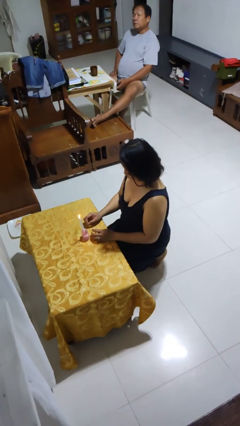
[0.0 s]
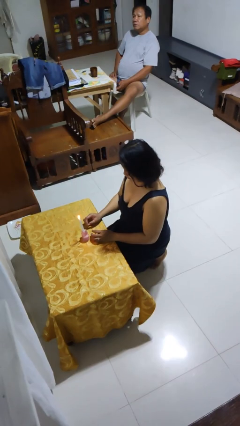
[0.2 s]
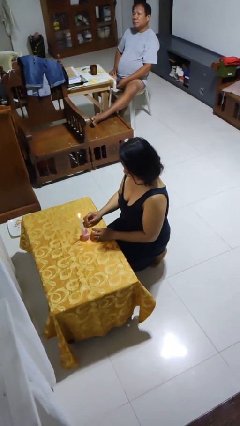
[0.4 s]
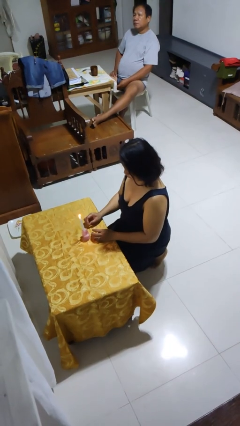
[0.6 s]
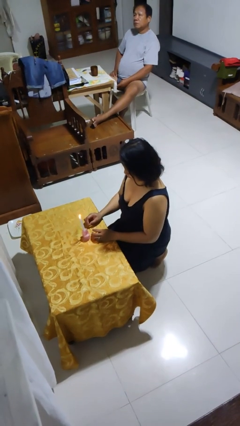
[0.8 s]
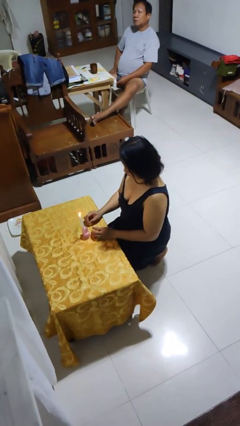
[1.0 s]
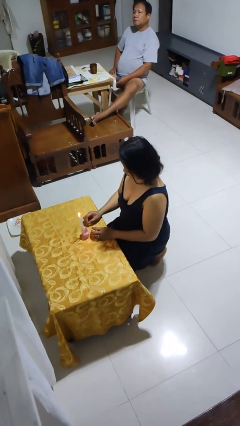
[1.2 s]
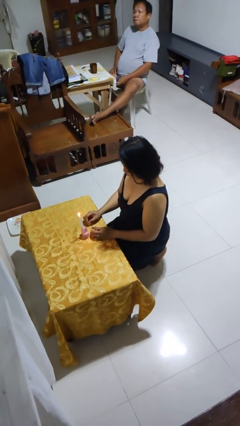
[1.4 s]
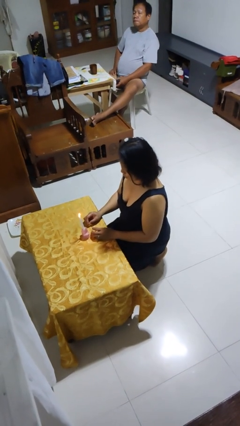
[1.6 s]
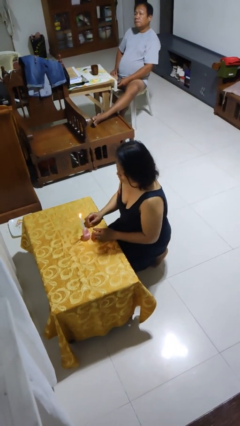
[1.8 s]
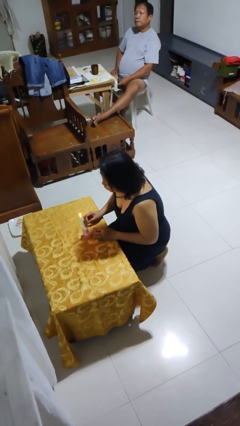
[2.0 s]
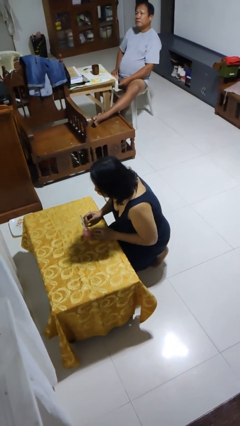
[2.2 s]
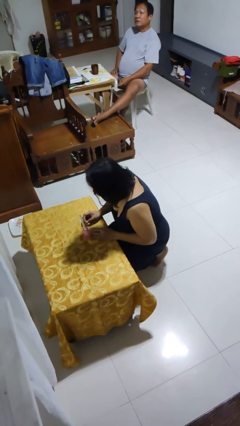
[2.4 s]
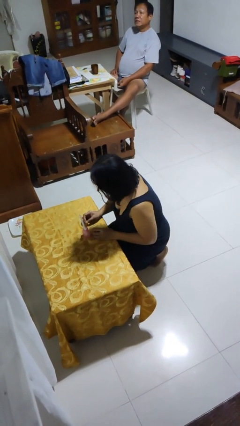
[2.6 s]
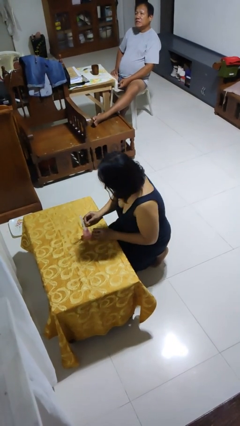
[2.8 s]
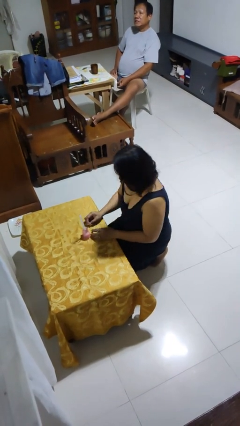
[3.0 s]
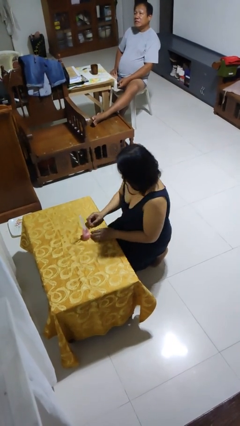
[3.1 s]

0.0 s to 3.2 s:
person extinguishes candle

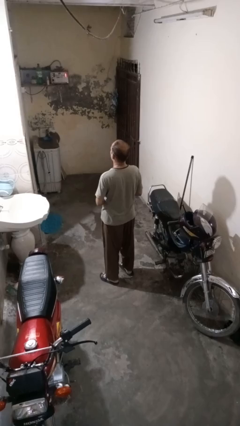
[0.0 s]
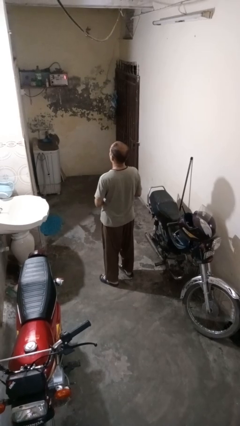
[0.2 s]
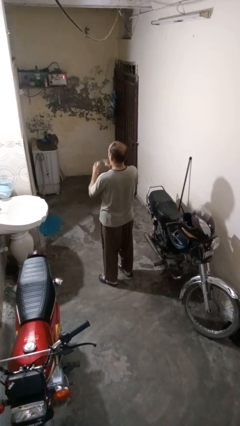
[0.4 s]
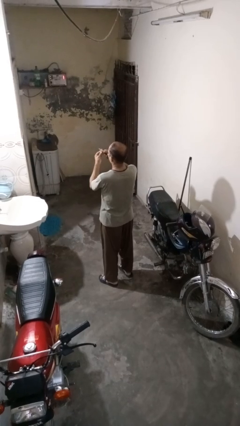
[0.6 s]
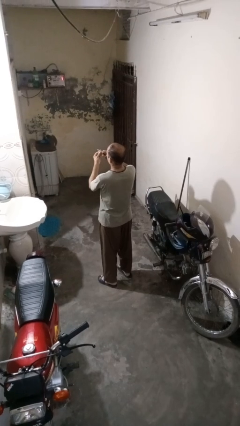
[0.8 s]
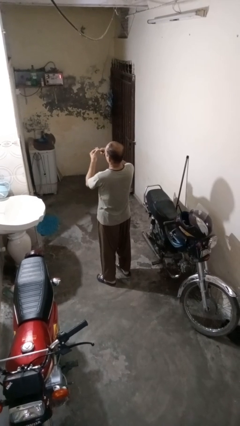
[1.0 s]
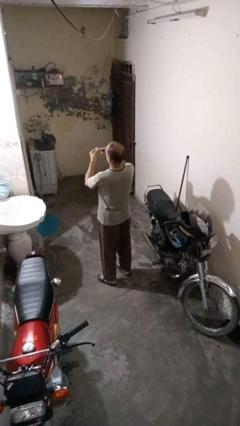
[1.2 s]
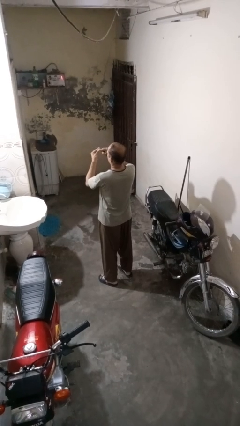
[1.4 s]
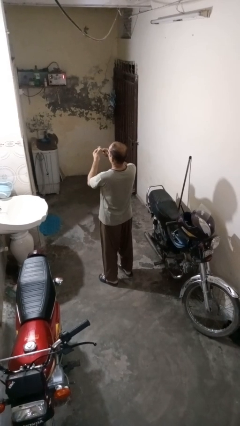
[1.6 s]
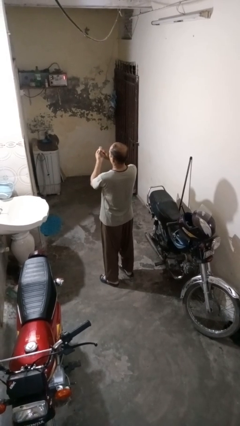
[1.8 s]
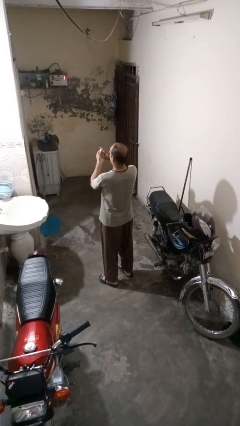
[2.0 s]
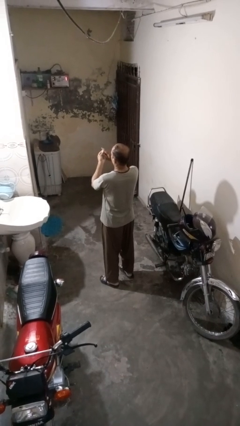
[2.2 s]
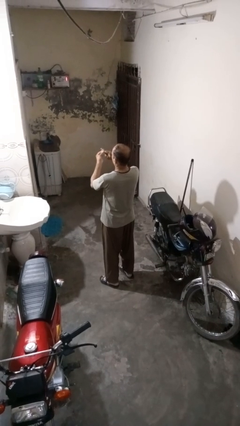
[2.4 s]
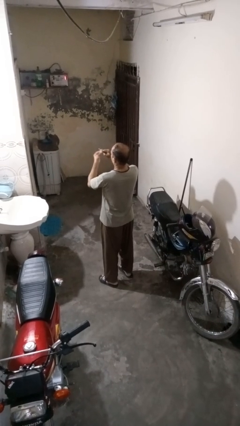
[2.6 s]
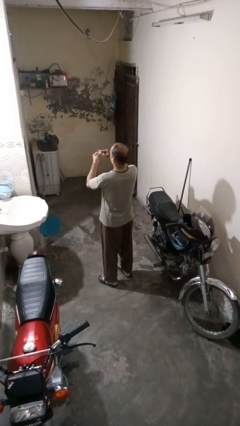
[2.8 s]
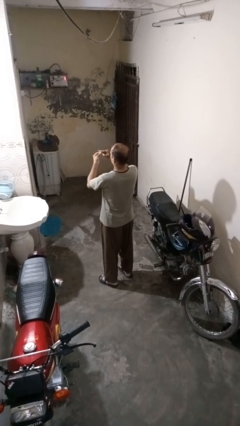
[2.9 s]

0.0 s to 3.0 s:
person files fingernails

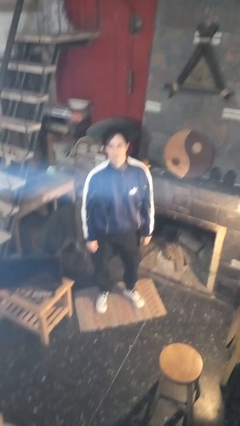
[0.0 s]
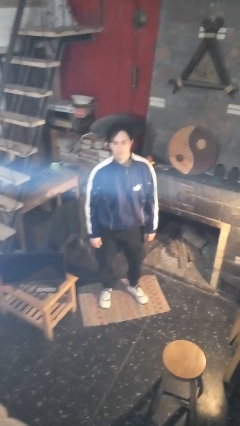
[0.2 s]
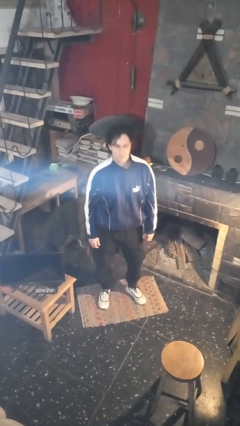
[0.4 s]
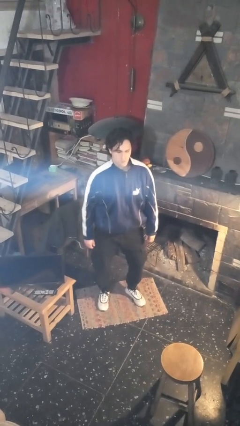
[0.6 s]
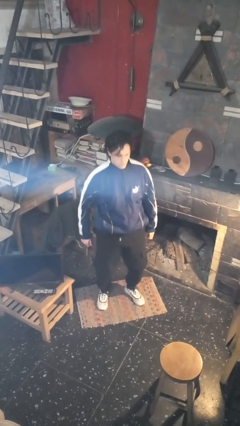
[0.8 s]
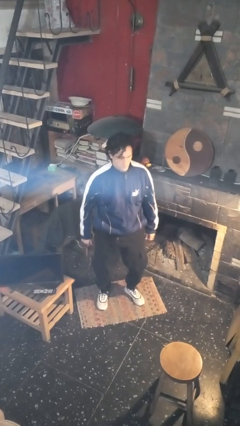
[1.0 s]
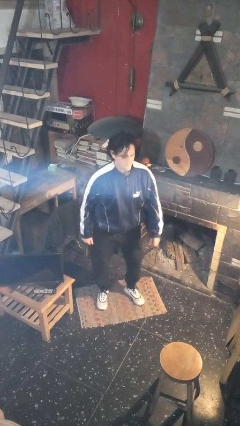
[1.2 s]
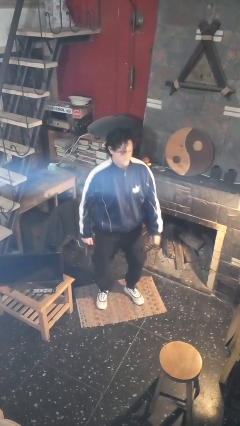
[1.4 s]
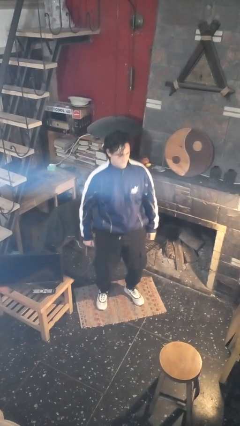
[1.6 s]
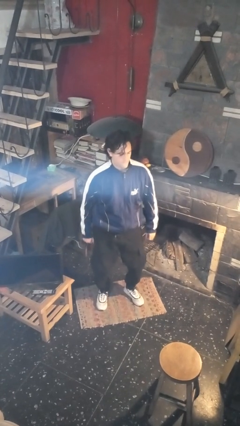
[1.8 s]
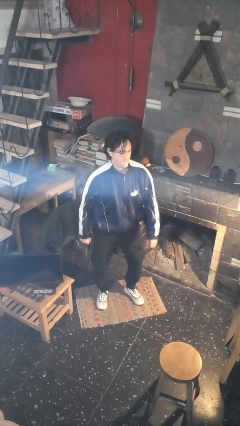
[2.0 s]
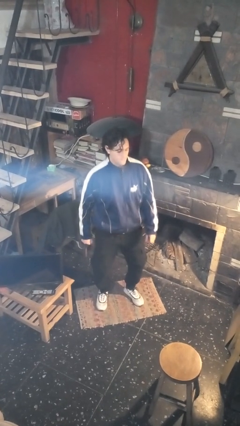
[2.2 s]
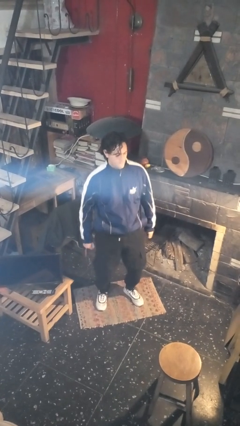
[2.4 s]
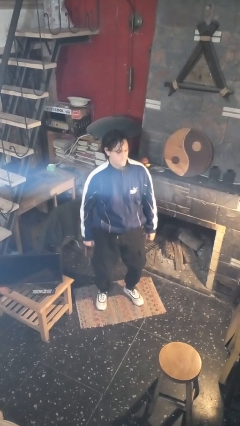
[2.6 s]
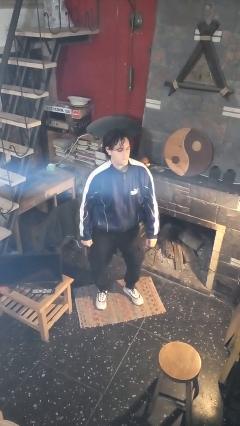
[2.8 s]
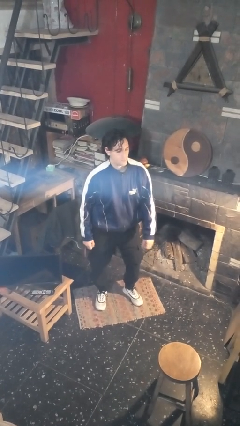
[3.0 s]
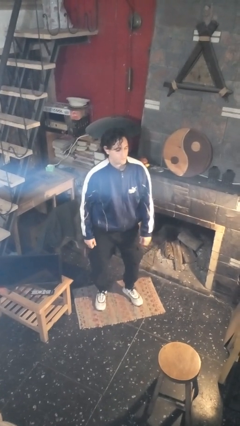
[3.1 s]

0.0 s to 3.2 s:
person wiggles hips

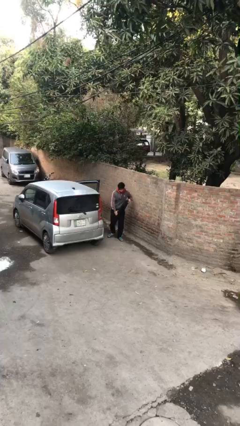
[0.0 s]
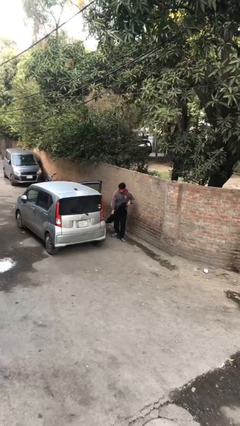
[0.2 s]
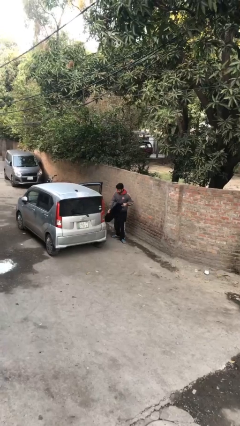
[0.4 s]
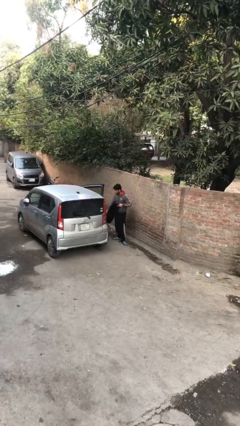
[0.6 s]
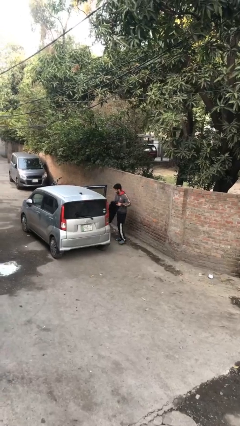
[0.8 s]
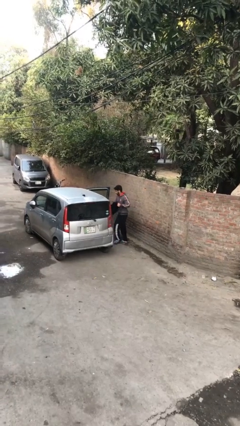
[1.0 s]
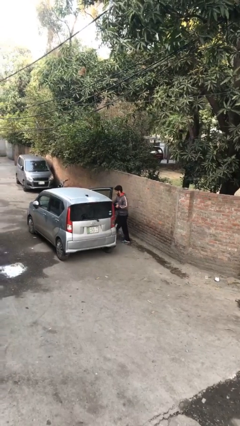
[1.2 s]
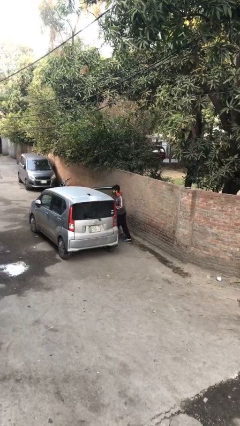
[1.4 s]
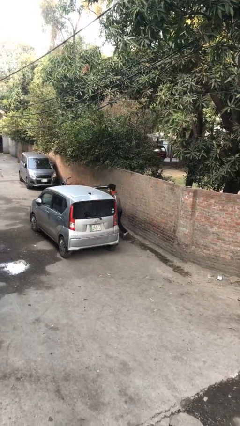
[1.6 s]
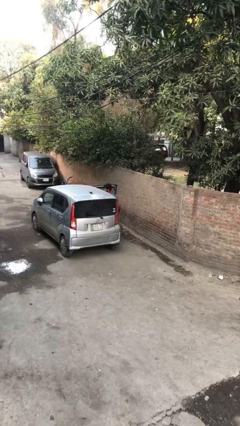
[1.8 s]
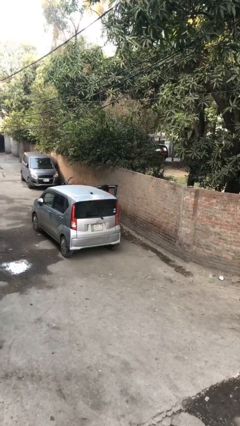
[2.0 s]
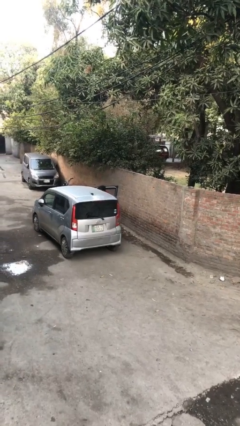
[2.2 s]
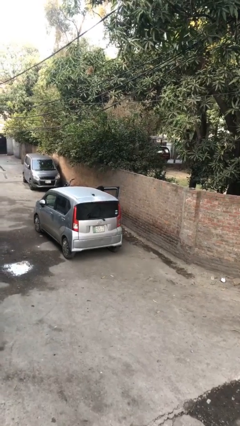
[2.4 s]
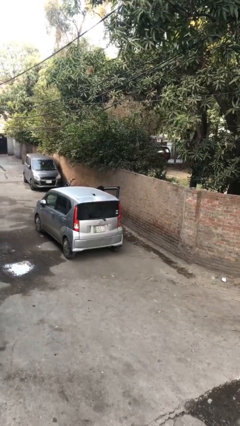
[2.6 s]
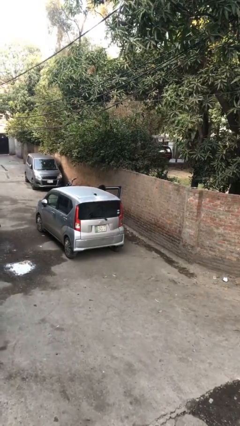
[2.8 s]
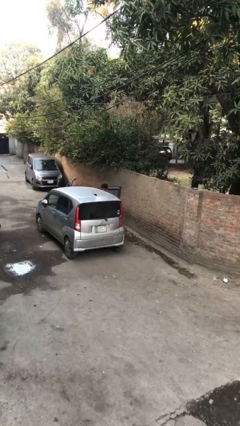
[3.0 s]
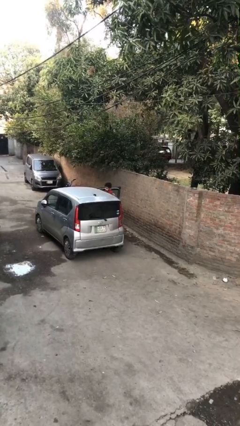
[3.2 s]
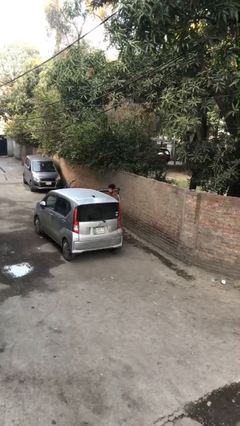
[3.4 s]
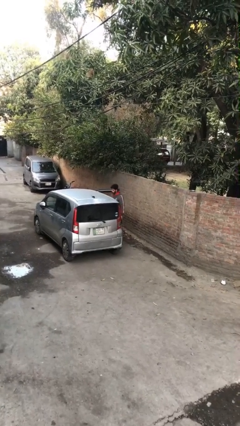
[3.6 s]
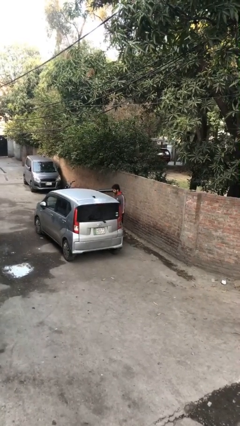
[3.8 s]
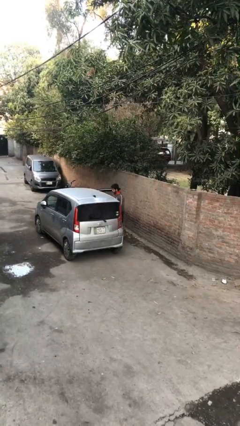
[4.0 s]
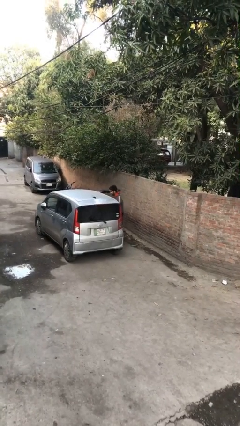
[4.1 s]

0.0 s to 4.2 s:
person loads car

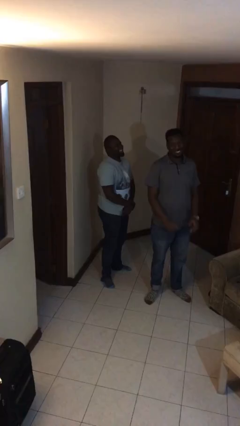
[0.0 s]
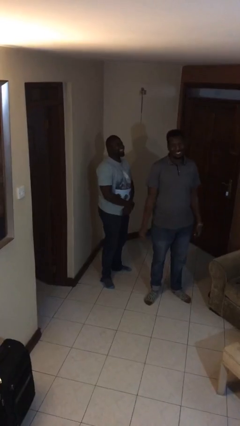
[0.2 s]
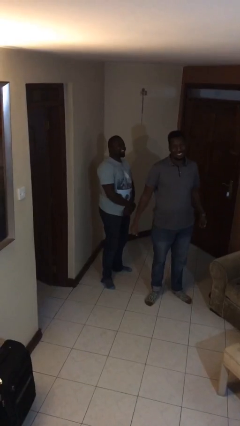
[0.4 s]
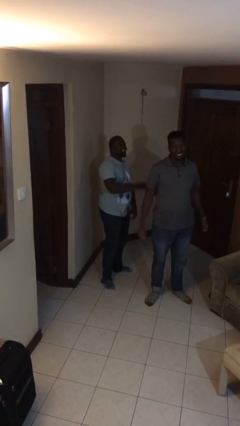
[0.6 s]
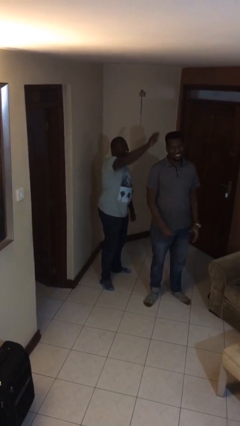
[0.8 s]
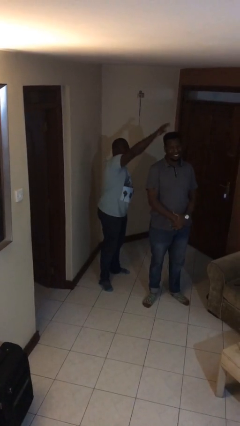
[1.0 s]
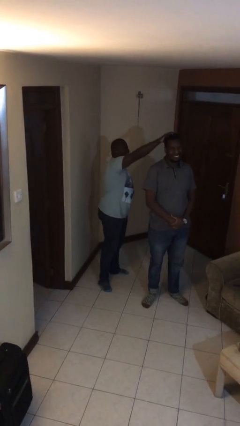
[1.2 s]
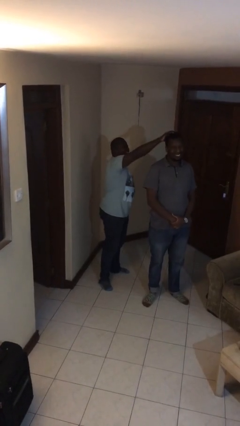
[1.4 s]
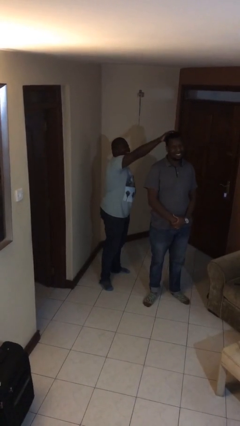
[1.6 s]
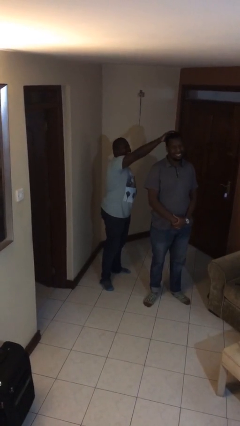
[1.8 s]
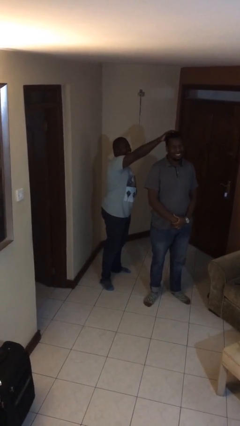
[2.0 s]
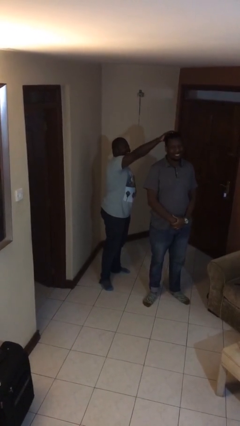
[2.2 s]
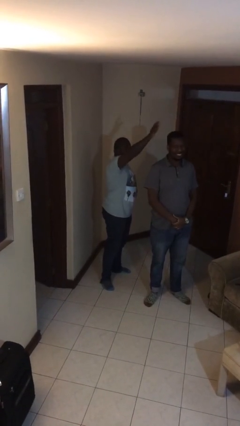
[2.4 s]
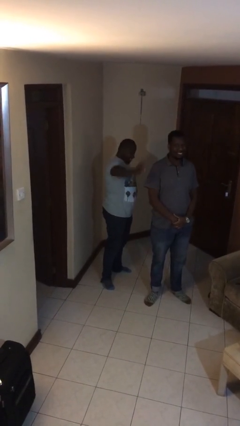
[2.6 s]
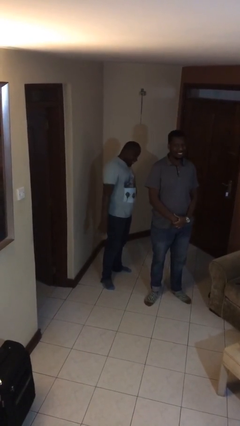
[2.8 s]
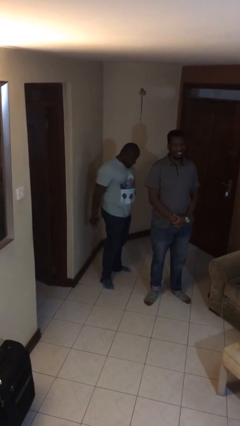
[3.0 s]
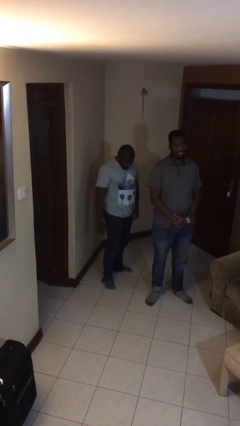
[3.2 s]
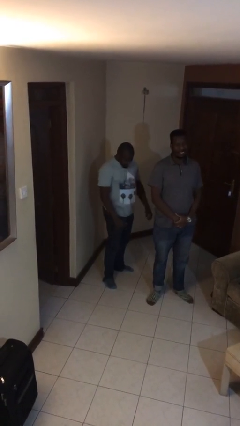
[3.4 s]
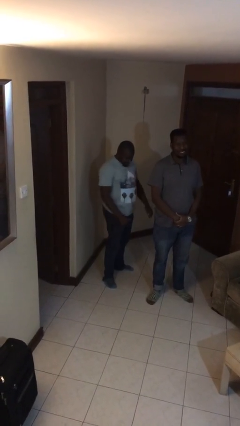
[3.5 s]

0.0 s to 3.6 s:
person grabs person by hair

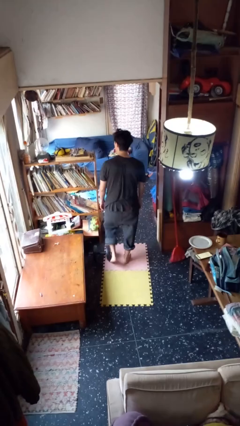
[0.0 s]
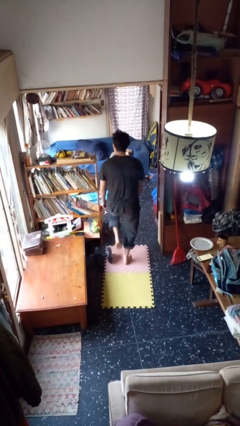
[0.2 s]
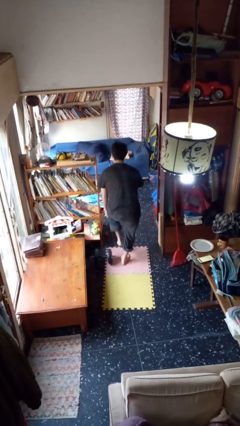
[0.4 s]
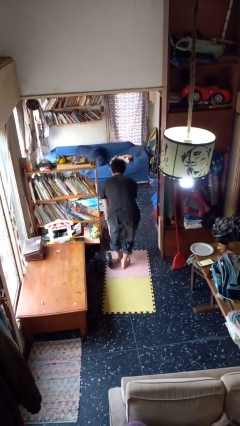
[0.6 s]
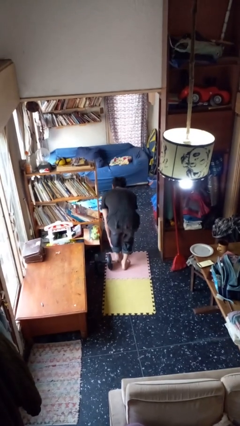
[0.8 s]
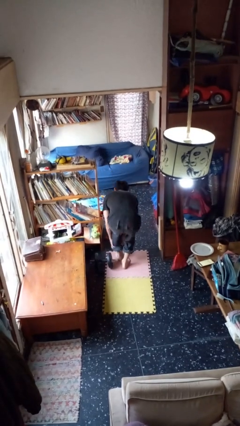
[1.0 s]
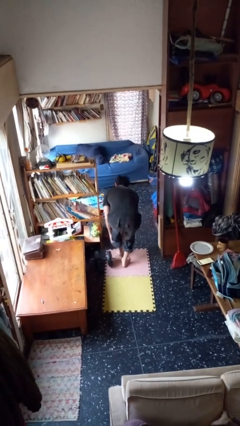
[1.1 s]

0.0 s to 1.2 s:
person stubs toe
